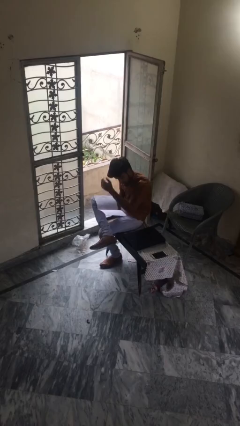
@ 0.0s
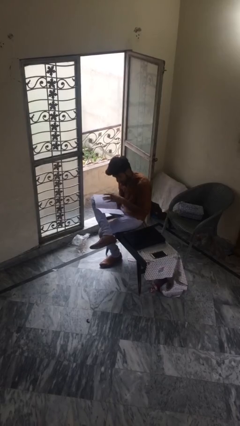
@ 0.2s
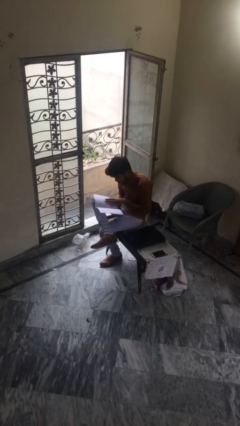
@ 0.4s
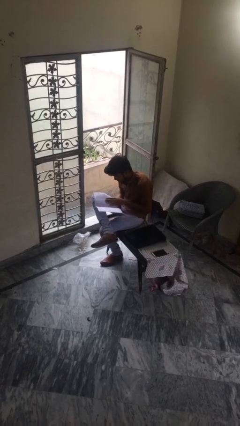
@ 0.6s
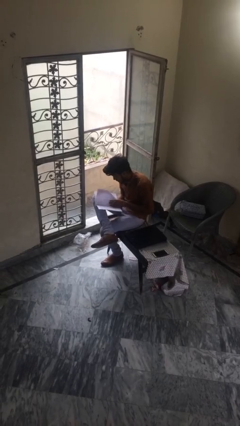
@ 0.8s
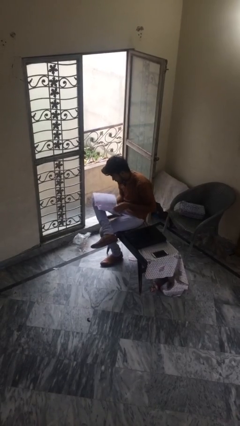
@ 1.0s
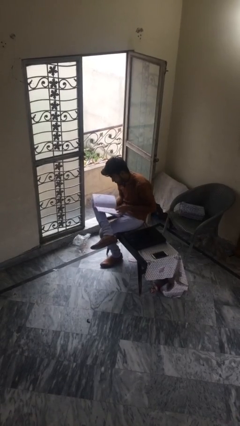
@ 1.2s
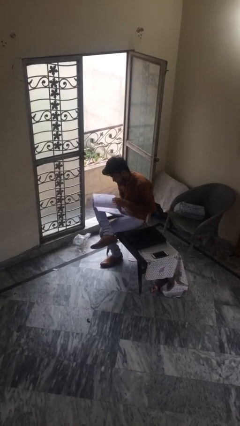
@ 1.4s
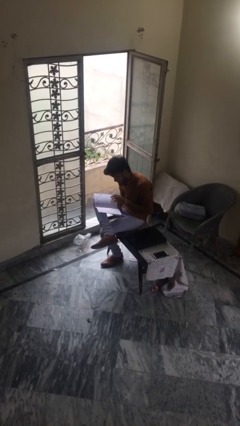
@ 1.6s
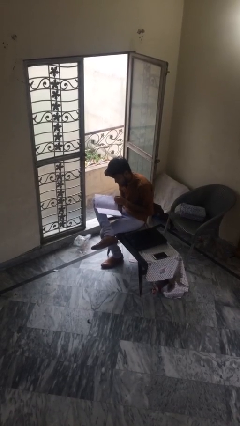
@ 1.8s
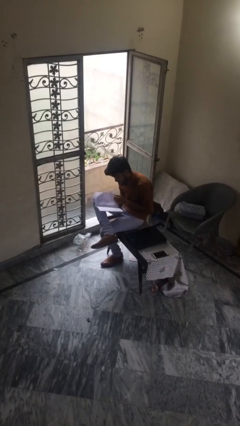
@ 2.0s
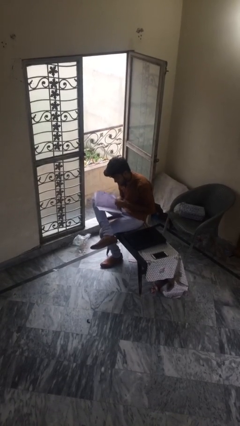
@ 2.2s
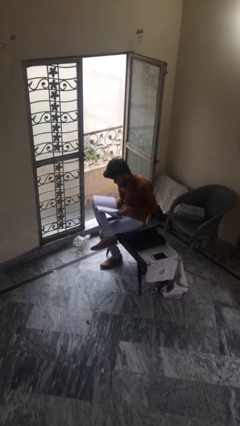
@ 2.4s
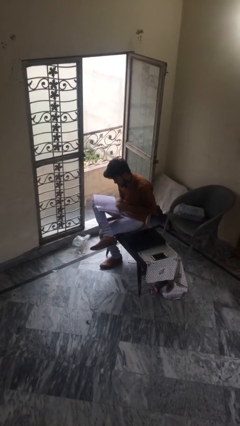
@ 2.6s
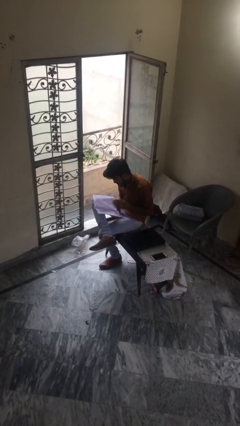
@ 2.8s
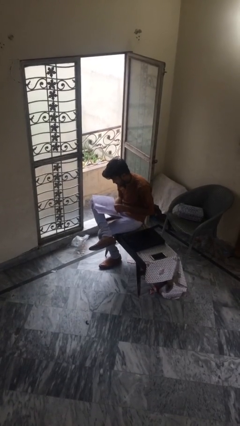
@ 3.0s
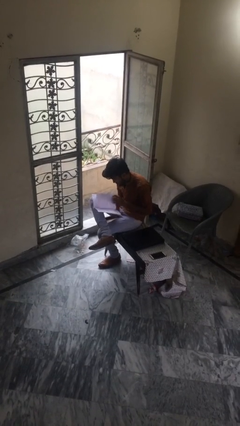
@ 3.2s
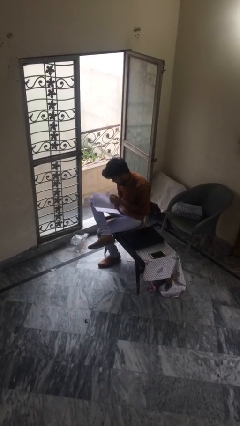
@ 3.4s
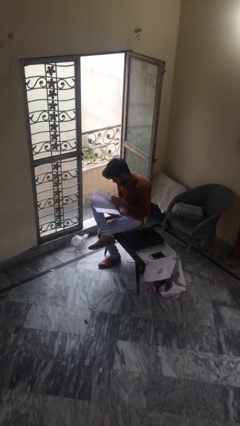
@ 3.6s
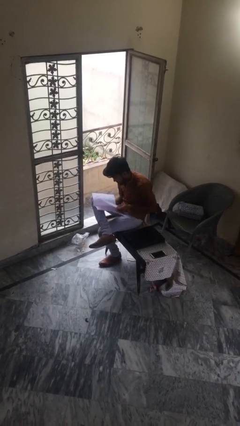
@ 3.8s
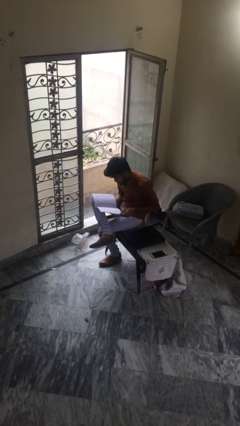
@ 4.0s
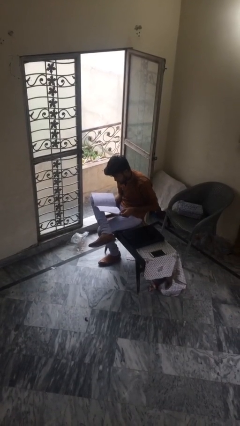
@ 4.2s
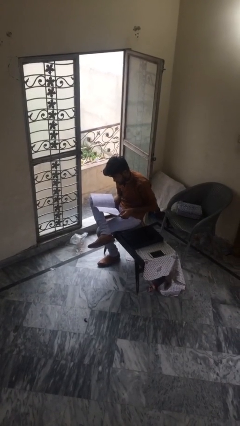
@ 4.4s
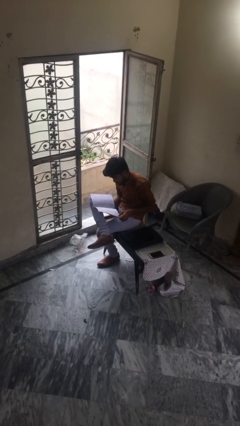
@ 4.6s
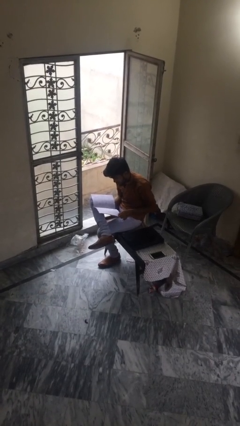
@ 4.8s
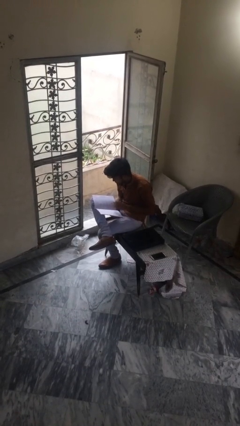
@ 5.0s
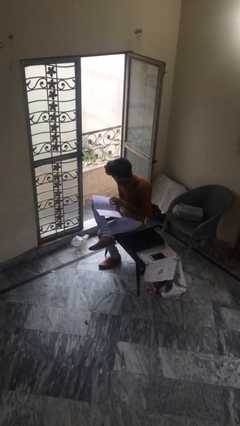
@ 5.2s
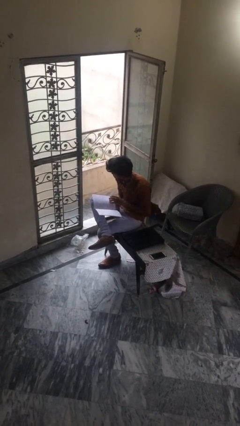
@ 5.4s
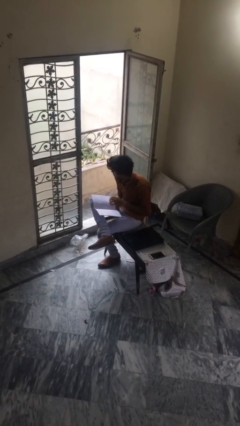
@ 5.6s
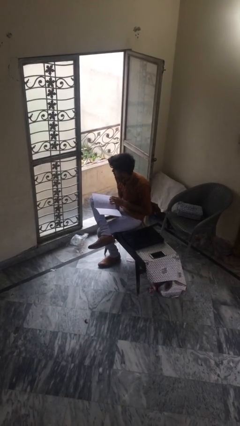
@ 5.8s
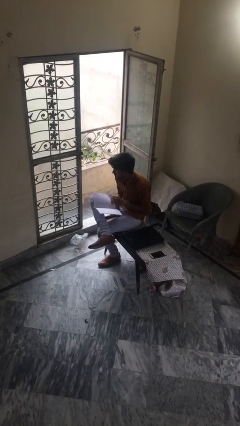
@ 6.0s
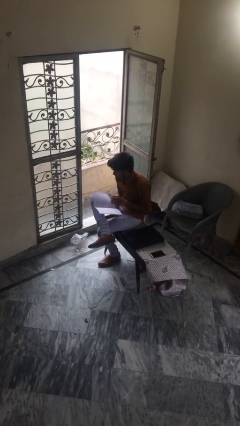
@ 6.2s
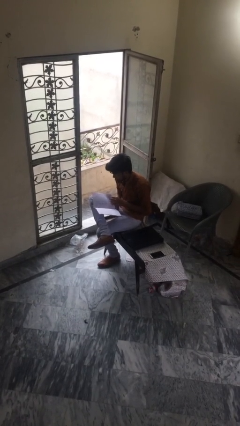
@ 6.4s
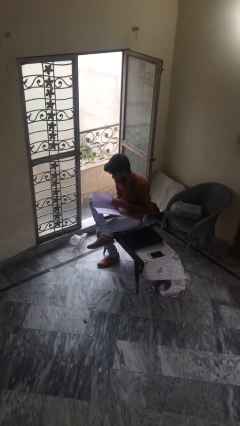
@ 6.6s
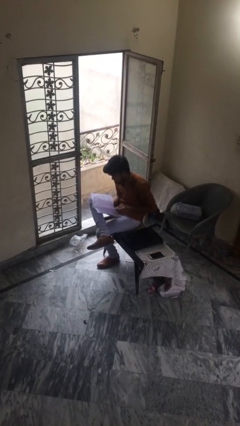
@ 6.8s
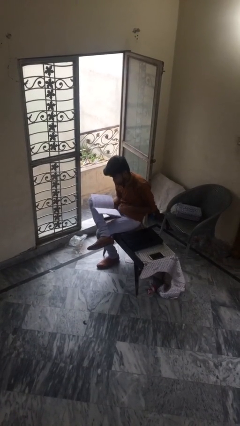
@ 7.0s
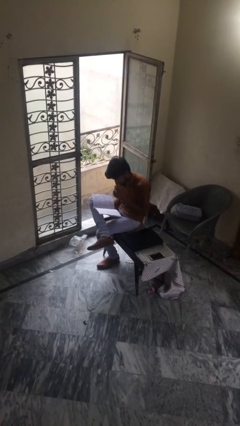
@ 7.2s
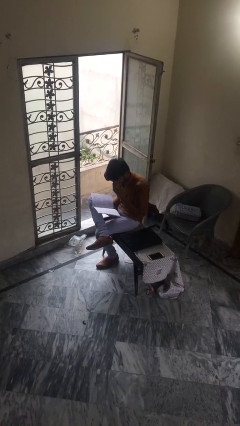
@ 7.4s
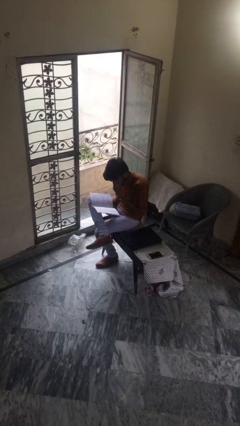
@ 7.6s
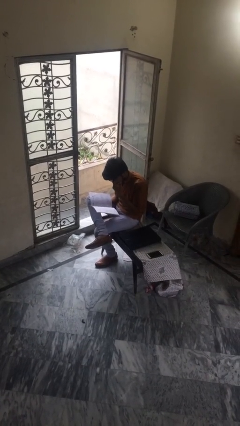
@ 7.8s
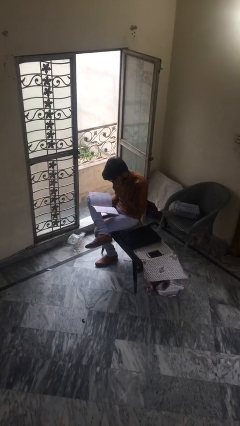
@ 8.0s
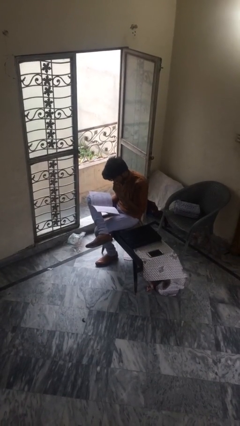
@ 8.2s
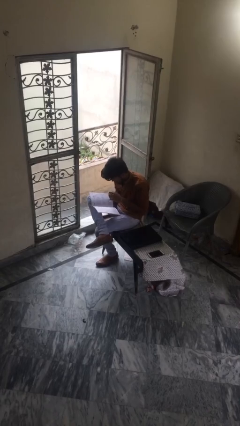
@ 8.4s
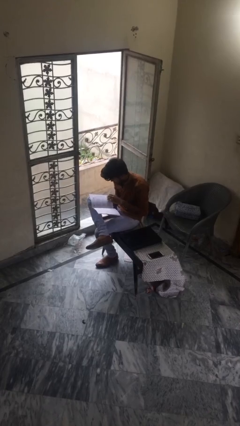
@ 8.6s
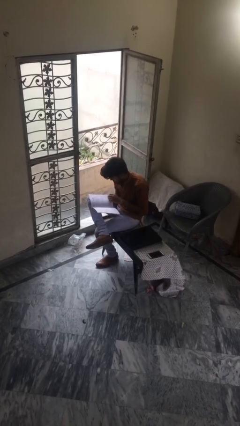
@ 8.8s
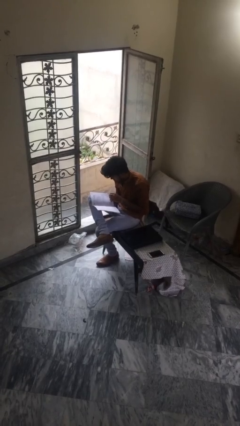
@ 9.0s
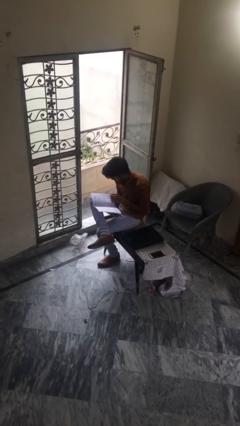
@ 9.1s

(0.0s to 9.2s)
person reads document

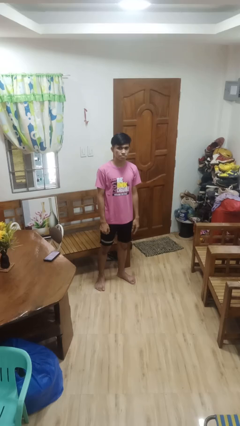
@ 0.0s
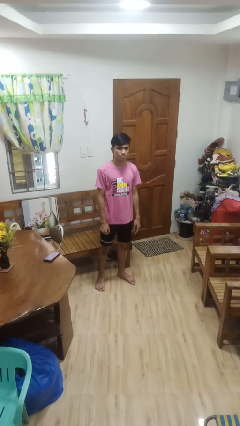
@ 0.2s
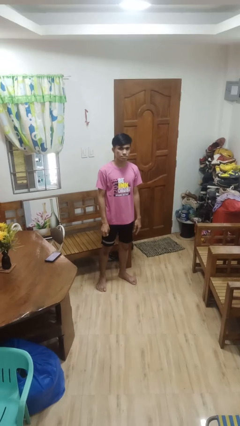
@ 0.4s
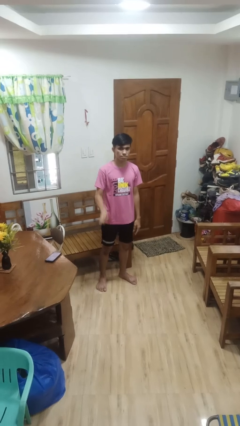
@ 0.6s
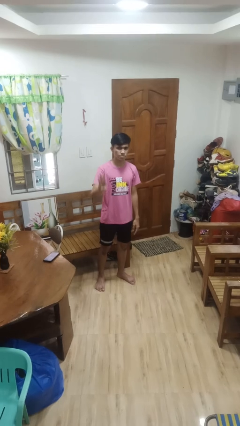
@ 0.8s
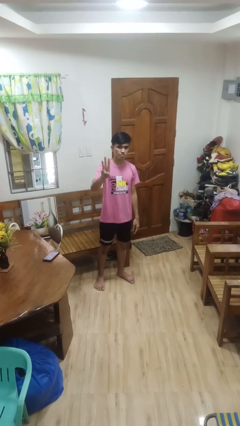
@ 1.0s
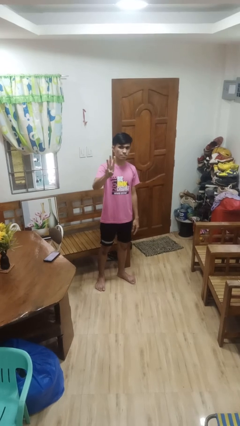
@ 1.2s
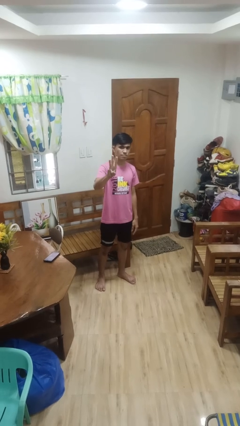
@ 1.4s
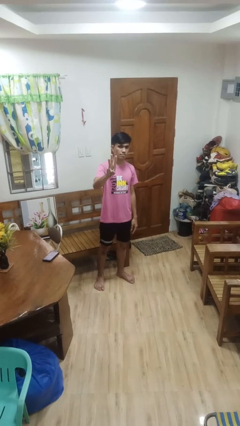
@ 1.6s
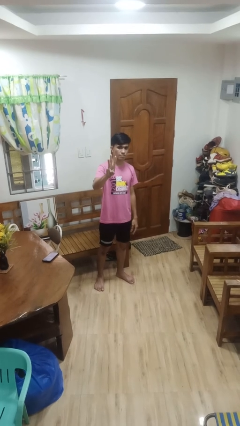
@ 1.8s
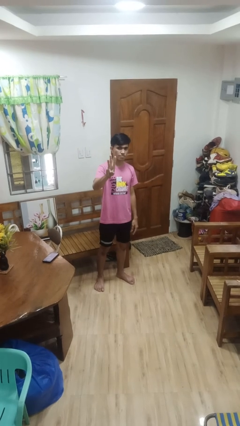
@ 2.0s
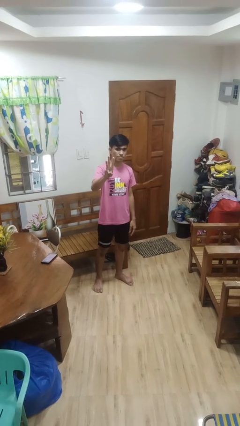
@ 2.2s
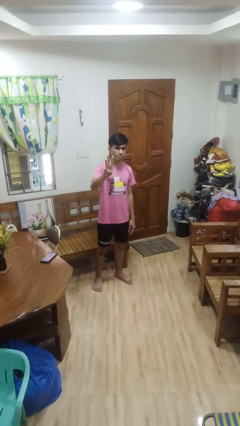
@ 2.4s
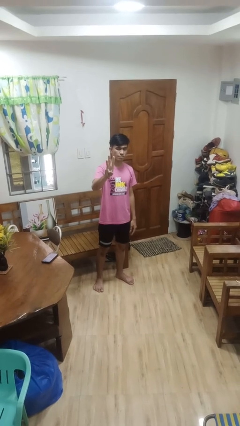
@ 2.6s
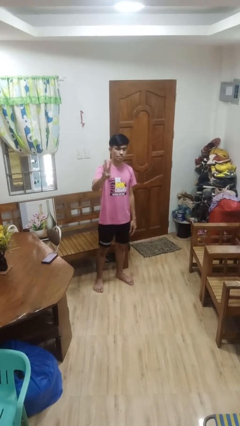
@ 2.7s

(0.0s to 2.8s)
person gestures number three

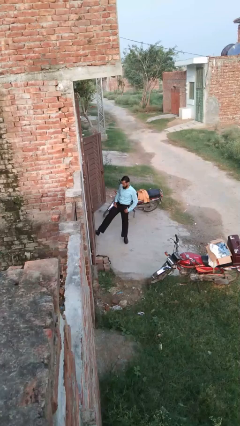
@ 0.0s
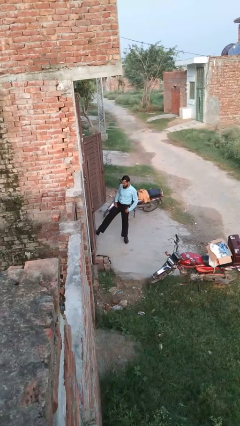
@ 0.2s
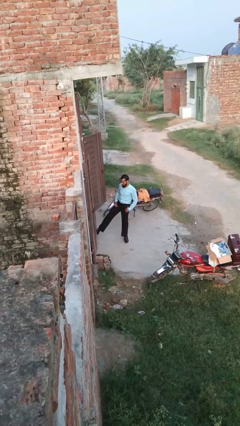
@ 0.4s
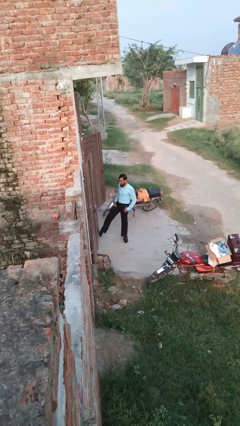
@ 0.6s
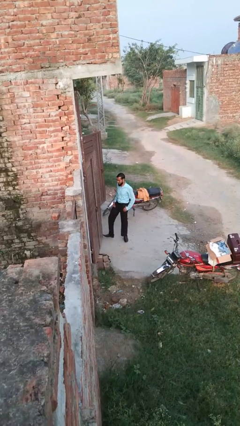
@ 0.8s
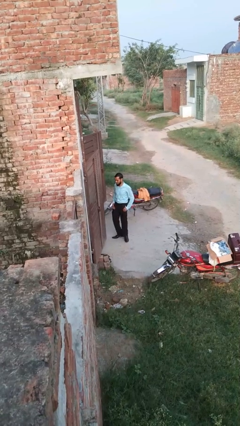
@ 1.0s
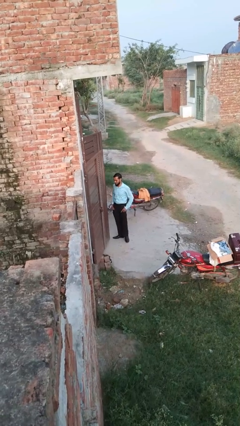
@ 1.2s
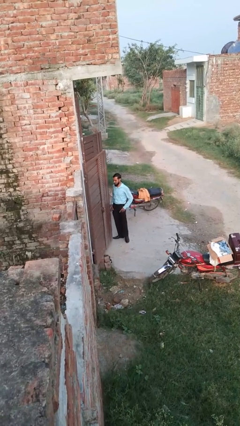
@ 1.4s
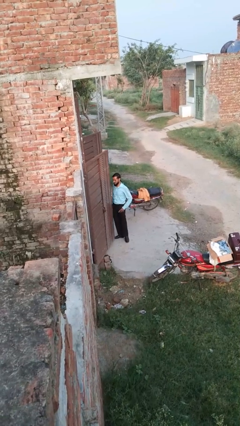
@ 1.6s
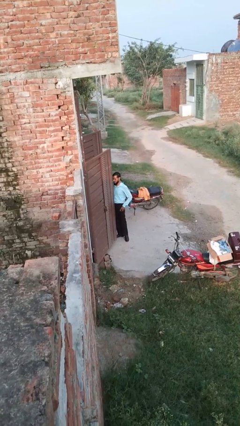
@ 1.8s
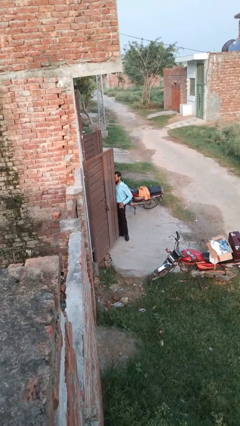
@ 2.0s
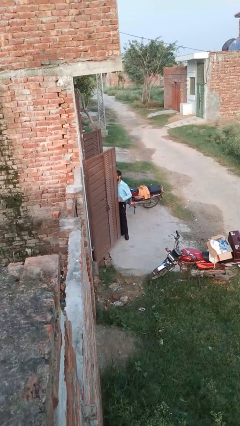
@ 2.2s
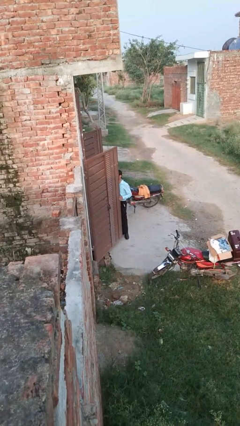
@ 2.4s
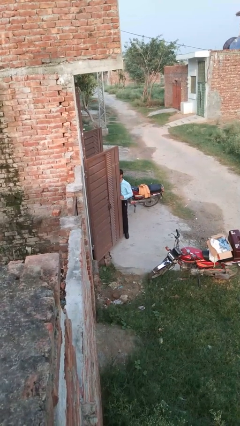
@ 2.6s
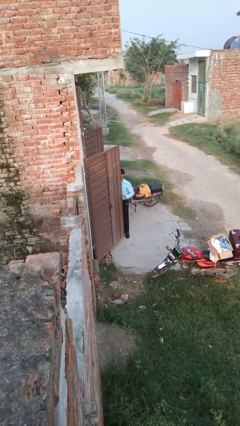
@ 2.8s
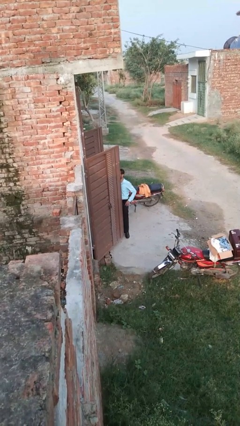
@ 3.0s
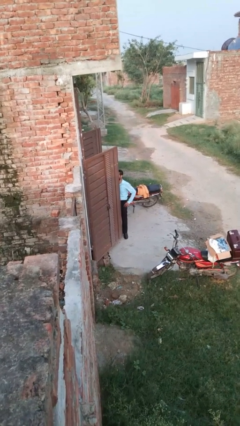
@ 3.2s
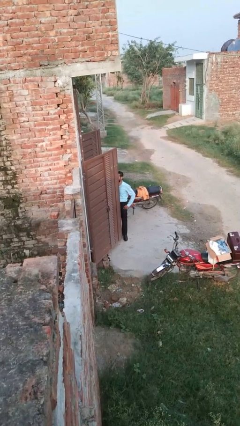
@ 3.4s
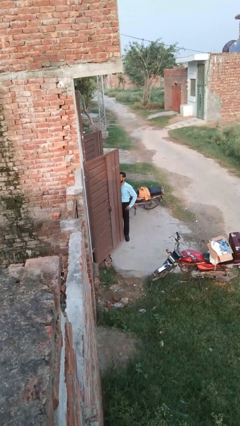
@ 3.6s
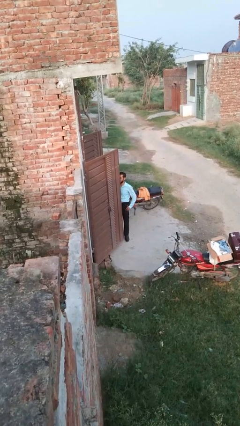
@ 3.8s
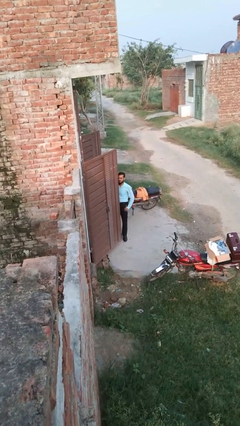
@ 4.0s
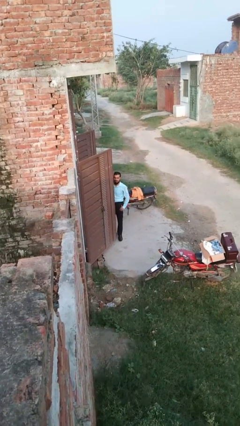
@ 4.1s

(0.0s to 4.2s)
person opens facility door

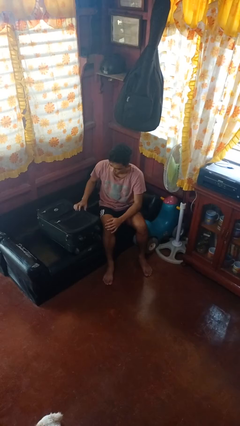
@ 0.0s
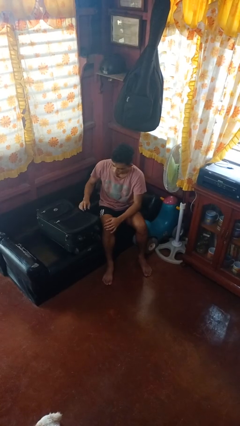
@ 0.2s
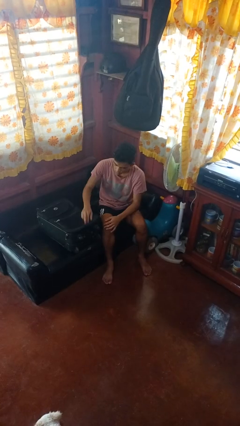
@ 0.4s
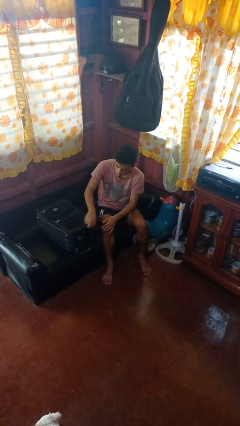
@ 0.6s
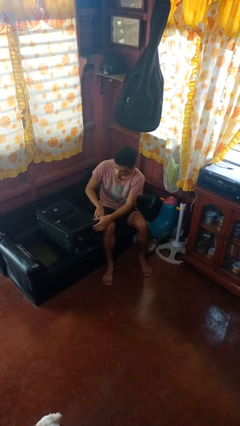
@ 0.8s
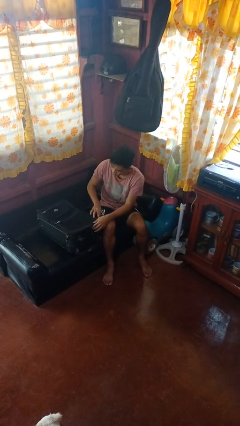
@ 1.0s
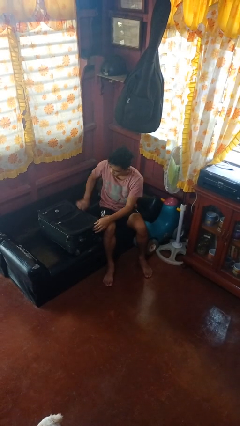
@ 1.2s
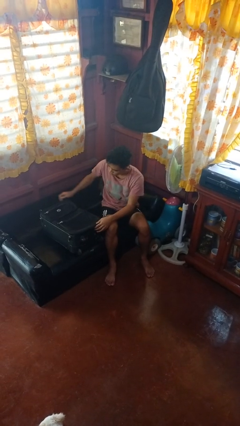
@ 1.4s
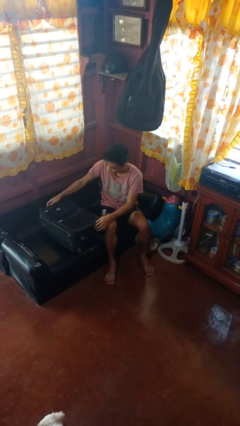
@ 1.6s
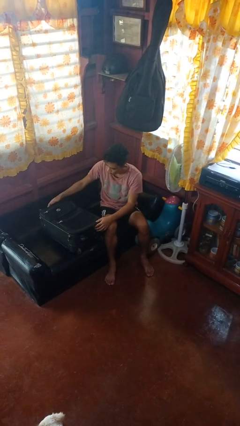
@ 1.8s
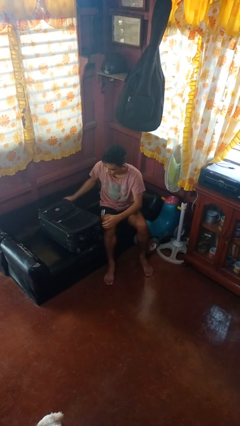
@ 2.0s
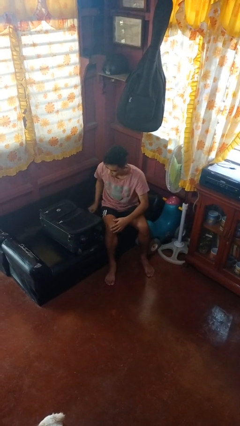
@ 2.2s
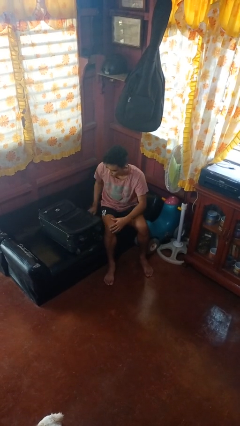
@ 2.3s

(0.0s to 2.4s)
person closes suitcase
